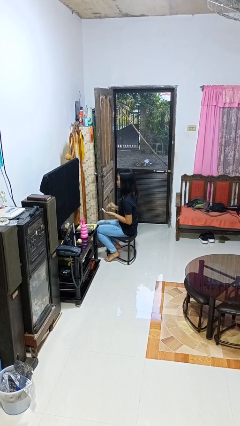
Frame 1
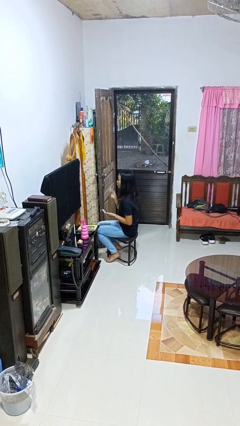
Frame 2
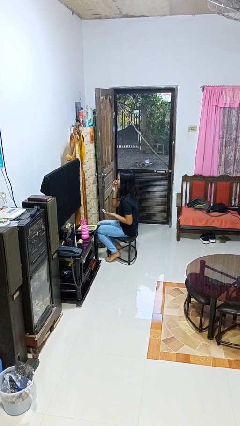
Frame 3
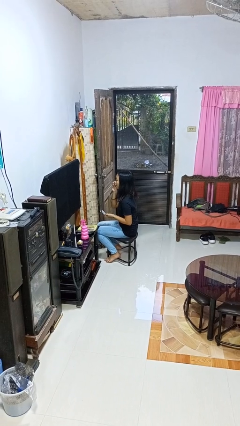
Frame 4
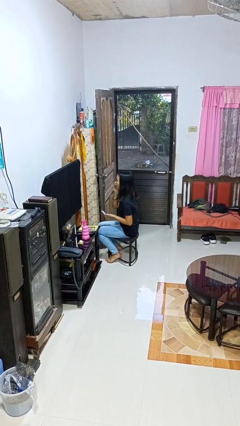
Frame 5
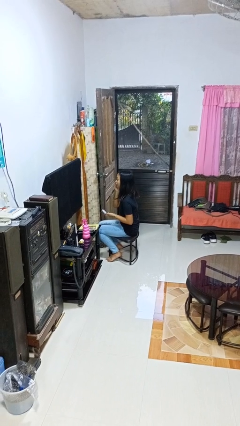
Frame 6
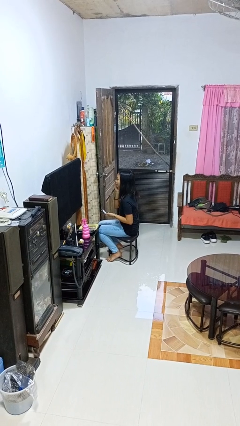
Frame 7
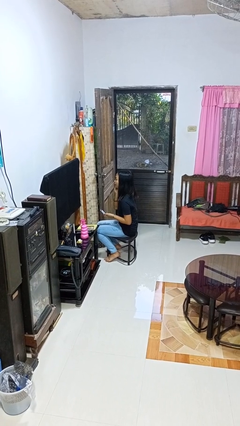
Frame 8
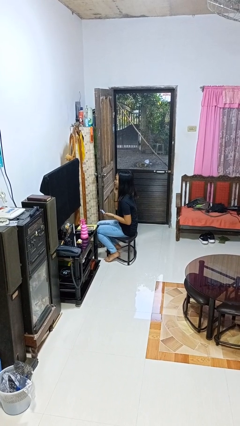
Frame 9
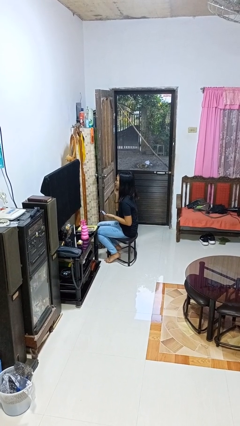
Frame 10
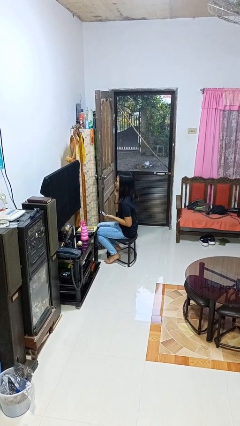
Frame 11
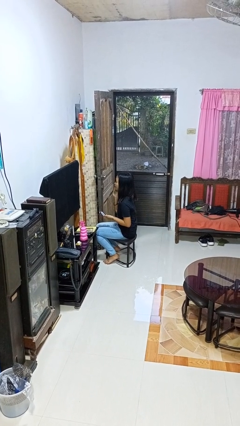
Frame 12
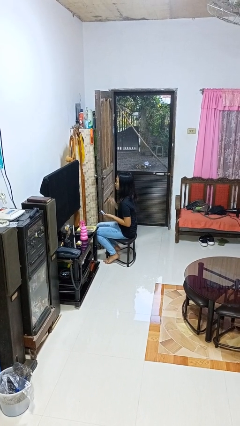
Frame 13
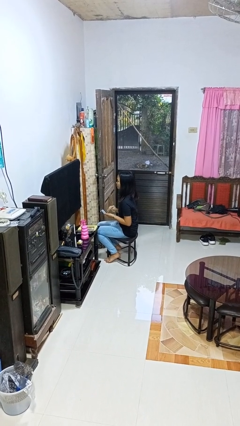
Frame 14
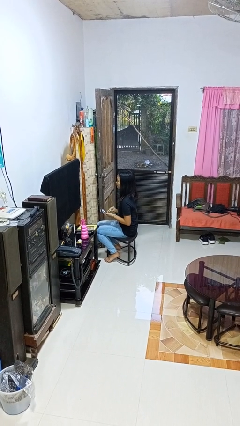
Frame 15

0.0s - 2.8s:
person applies foundation makeup

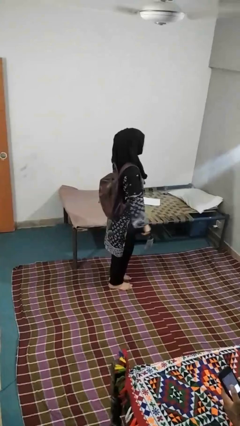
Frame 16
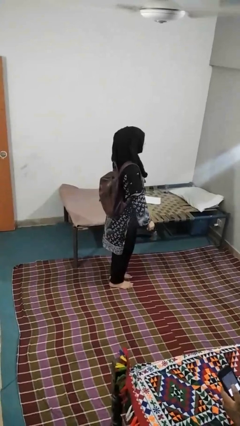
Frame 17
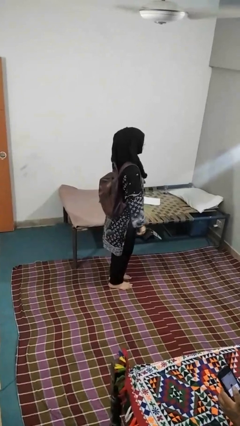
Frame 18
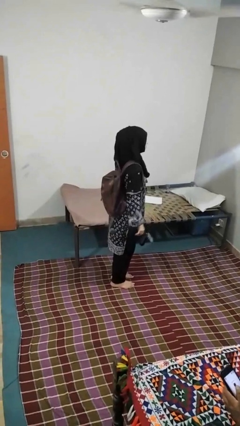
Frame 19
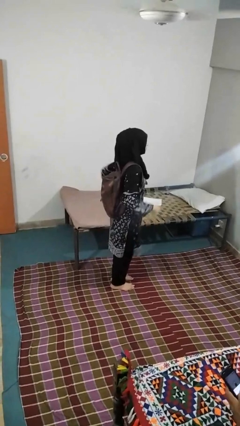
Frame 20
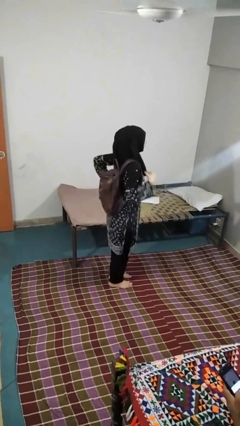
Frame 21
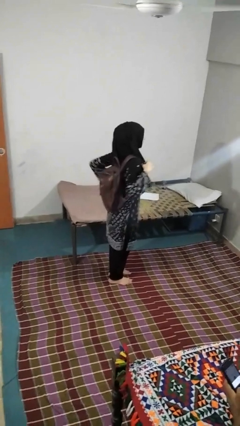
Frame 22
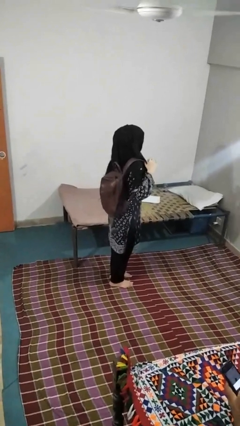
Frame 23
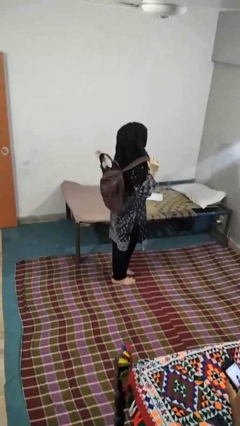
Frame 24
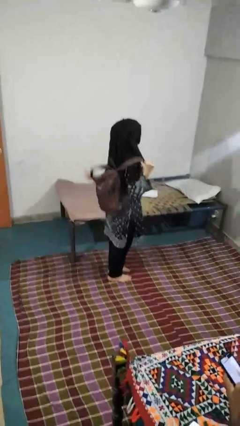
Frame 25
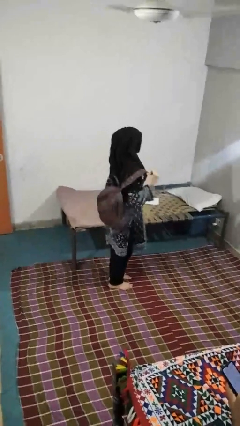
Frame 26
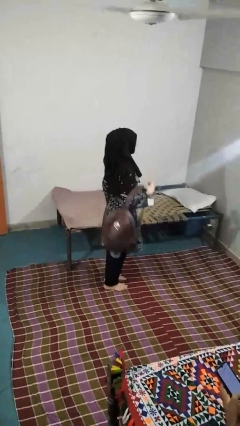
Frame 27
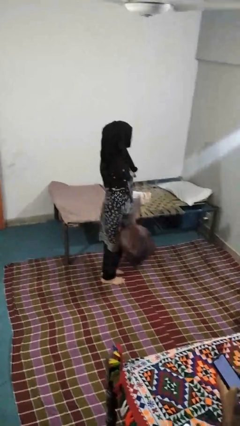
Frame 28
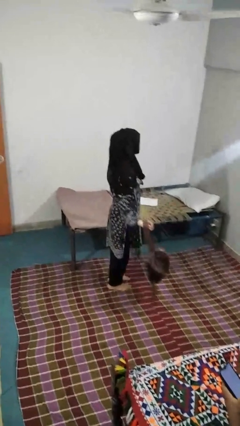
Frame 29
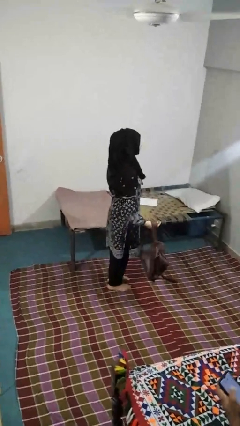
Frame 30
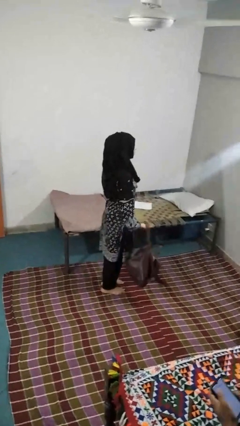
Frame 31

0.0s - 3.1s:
person takes off backpack

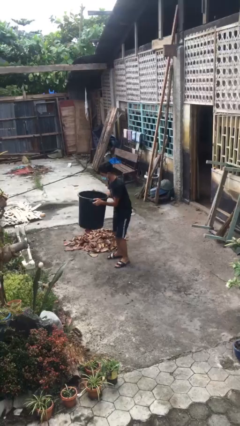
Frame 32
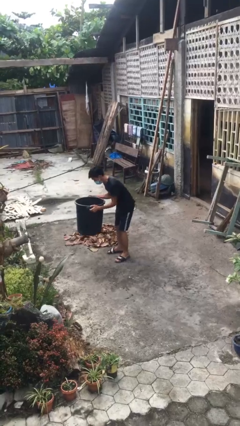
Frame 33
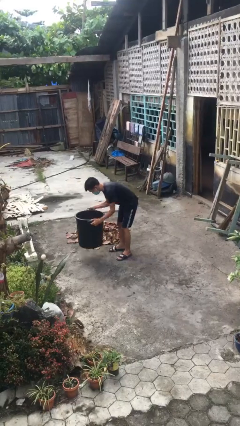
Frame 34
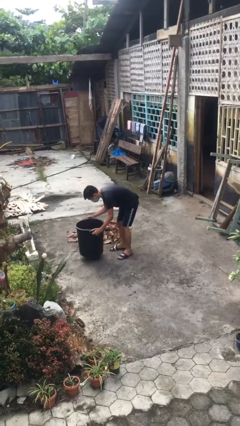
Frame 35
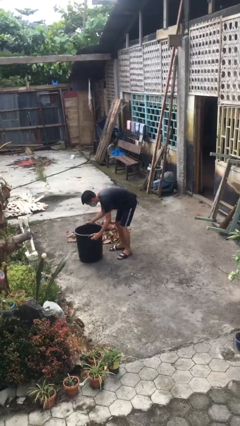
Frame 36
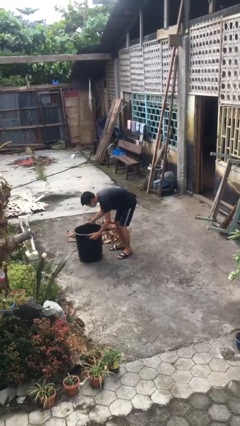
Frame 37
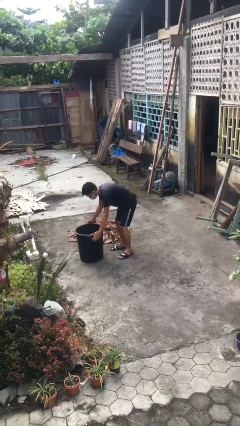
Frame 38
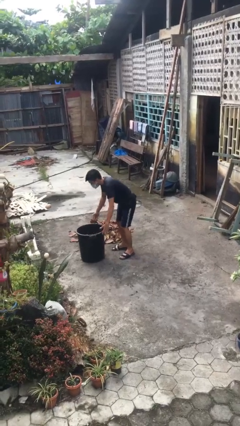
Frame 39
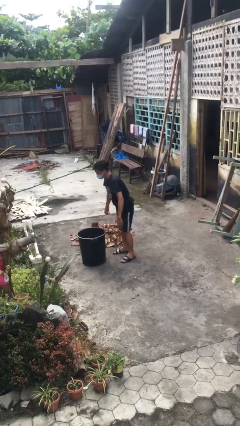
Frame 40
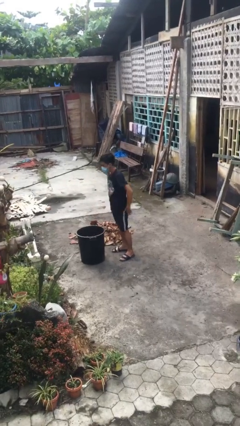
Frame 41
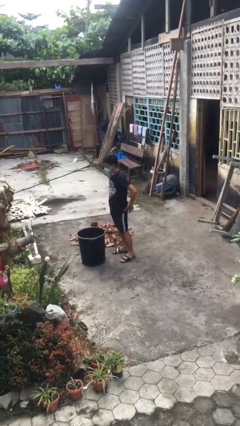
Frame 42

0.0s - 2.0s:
person puts down object on floor

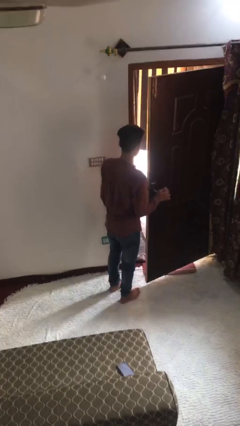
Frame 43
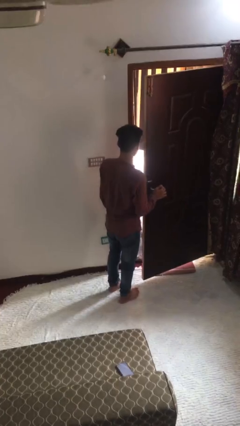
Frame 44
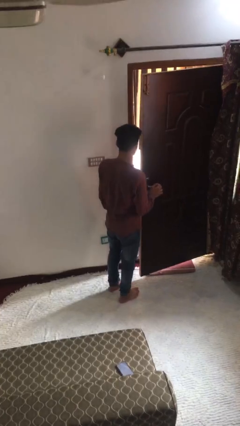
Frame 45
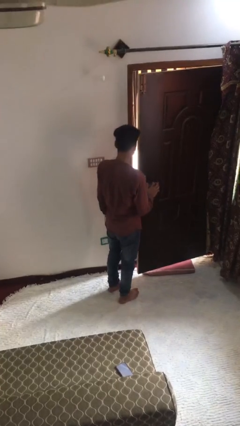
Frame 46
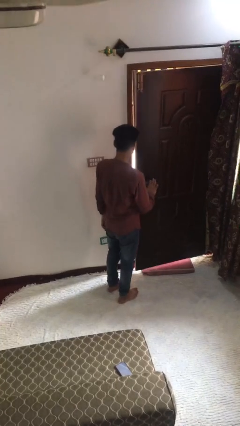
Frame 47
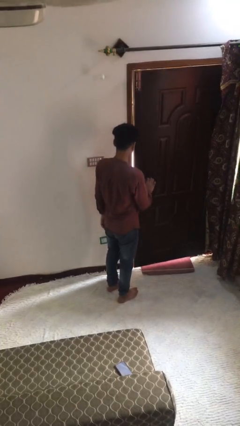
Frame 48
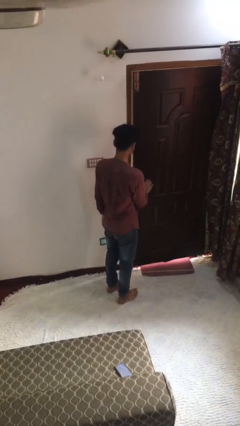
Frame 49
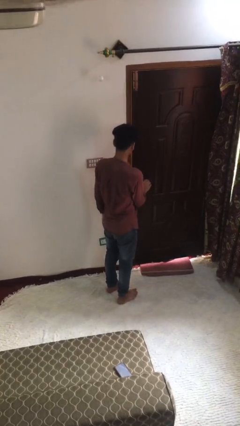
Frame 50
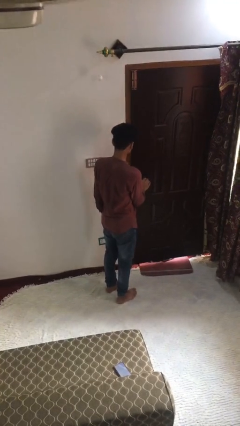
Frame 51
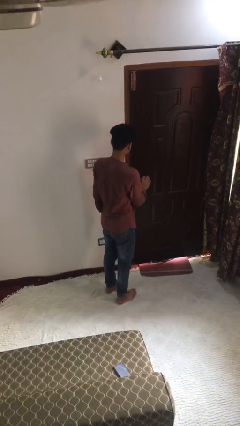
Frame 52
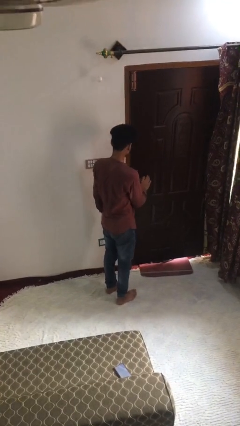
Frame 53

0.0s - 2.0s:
person closes facility door

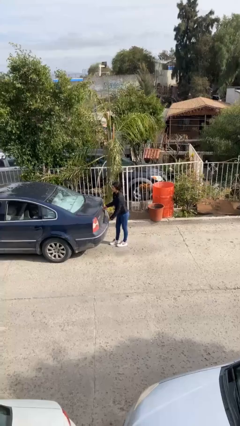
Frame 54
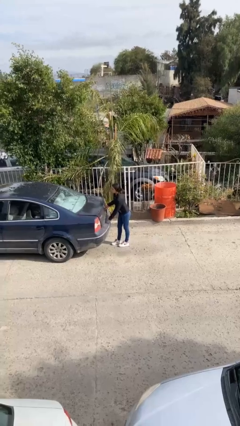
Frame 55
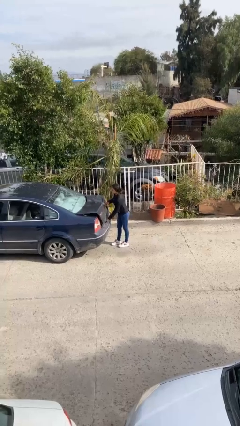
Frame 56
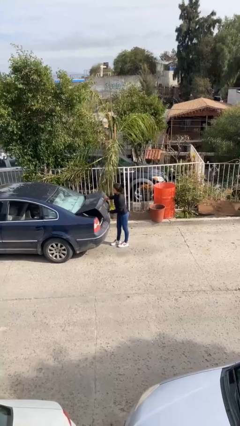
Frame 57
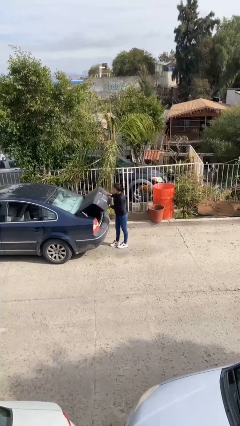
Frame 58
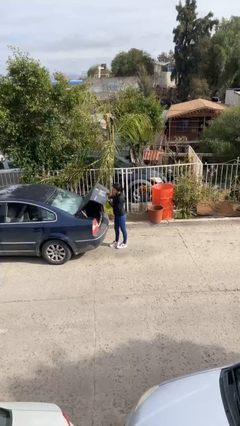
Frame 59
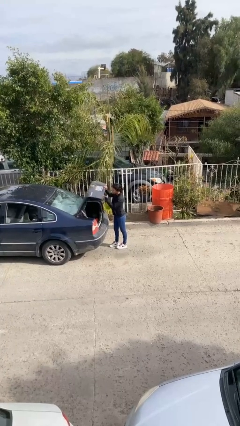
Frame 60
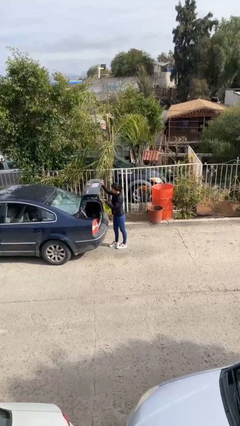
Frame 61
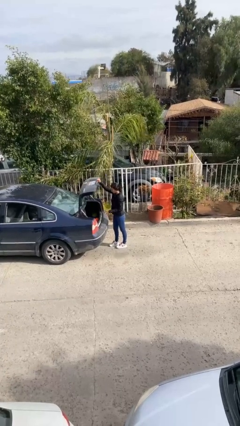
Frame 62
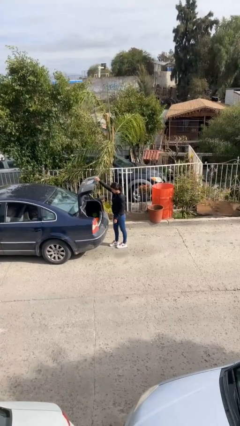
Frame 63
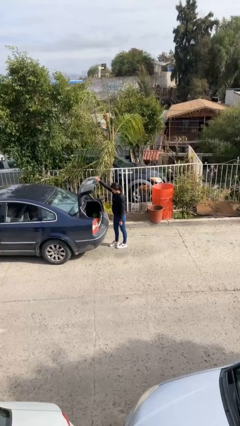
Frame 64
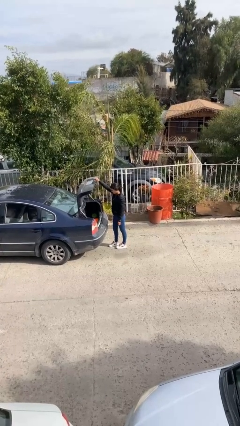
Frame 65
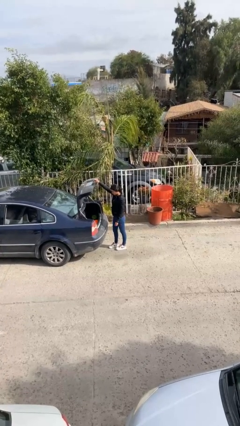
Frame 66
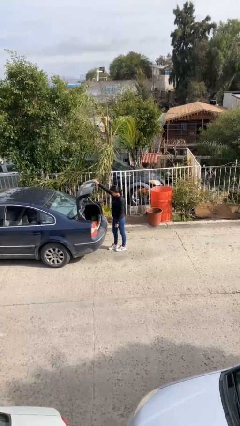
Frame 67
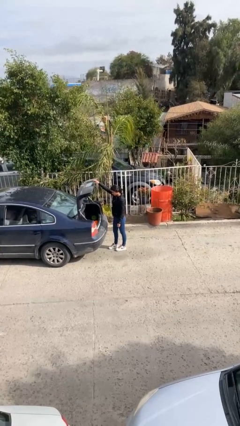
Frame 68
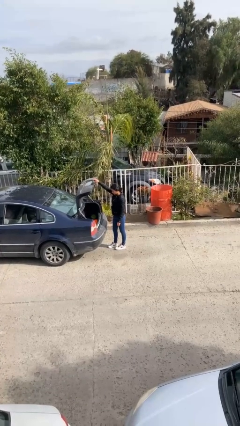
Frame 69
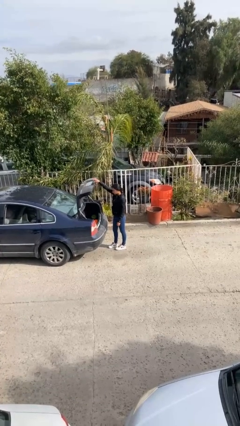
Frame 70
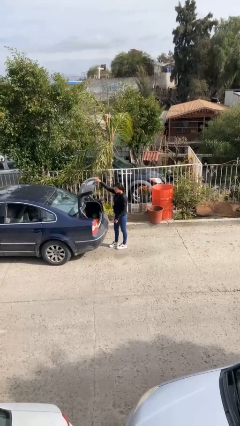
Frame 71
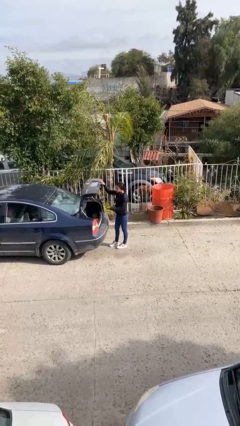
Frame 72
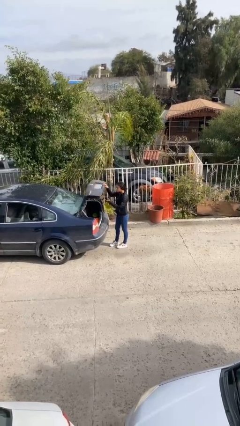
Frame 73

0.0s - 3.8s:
person opens car trunk

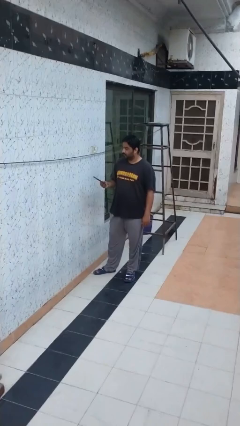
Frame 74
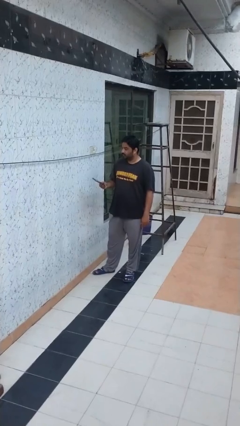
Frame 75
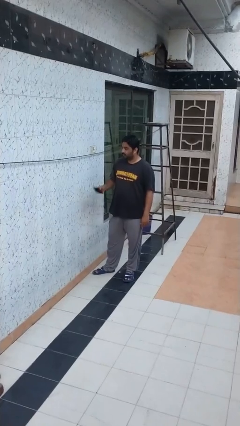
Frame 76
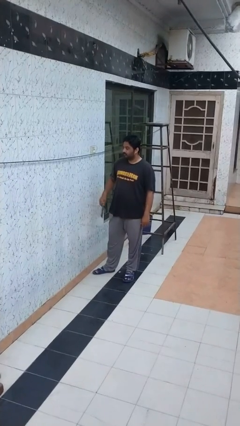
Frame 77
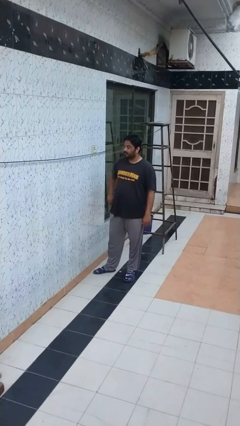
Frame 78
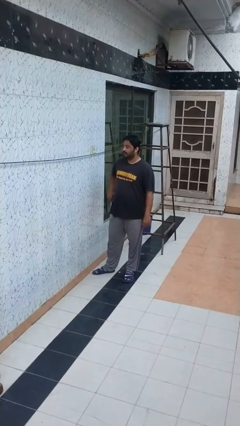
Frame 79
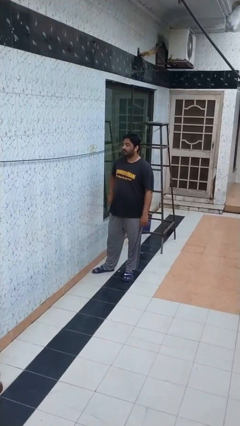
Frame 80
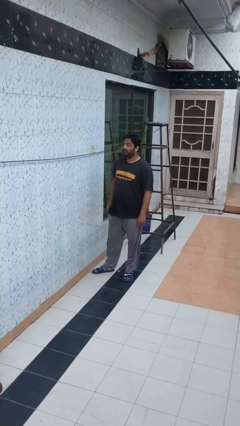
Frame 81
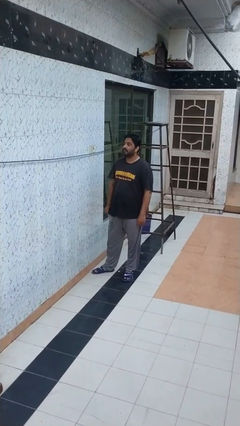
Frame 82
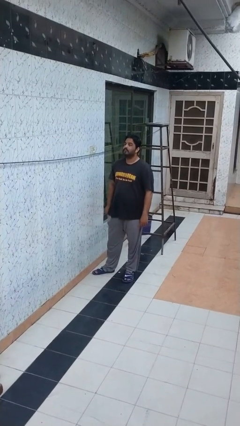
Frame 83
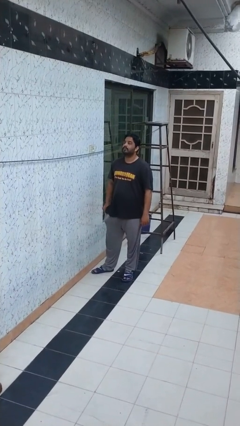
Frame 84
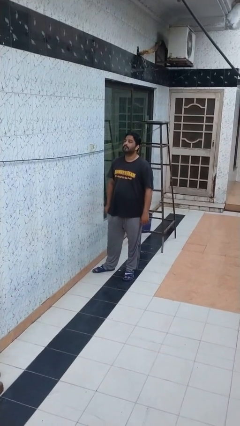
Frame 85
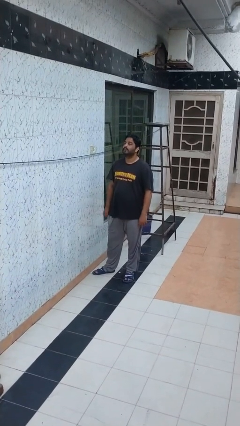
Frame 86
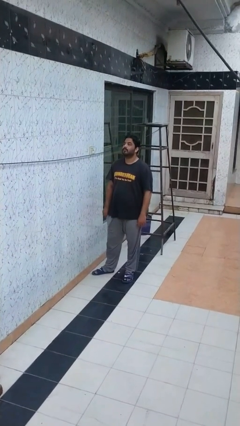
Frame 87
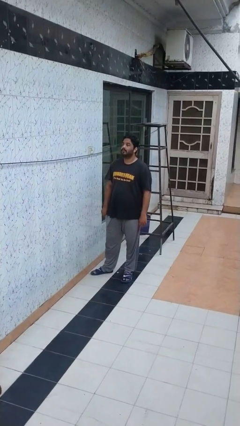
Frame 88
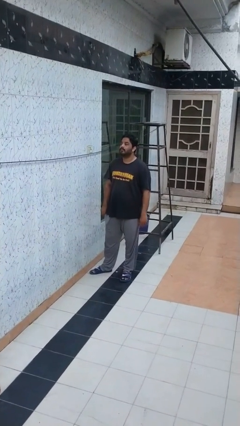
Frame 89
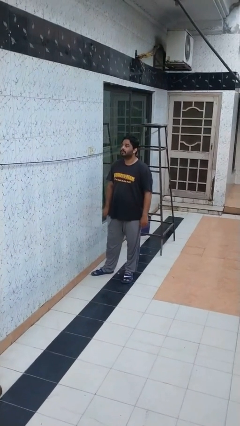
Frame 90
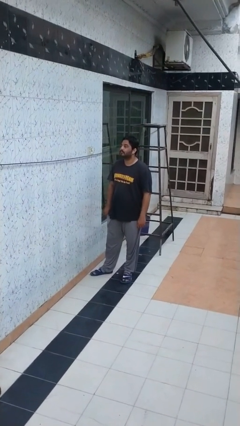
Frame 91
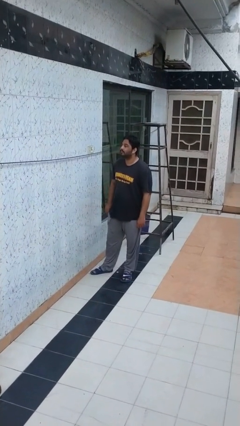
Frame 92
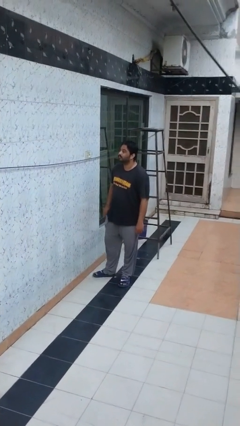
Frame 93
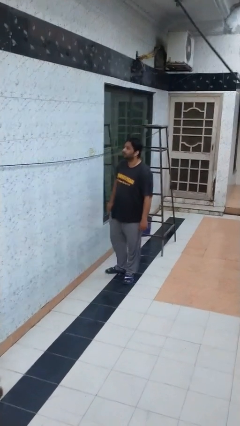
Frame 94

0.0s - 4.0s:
person puts phone into pocket
